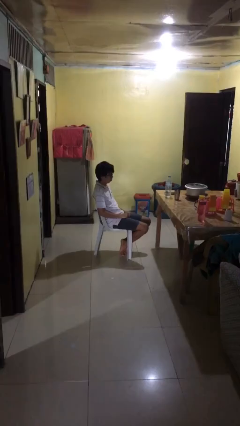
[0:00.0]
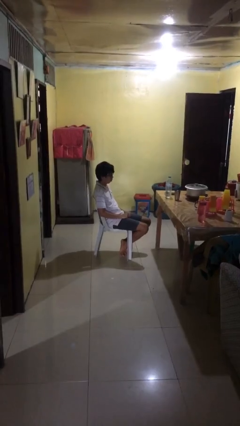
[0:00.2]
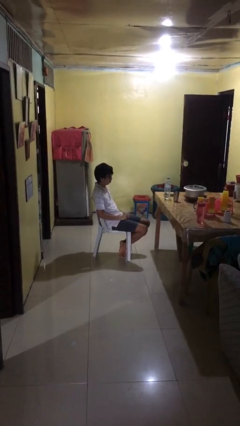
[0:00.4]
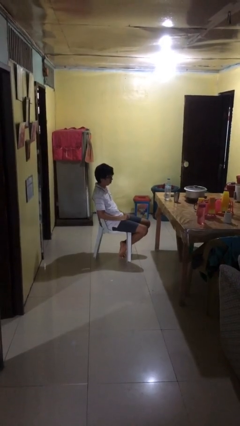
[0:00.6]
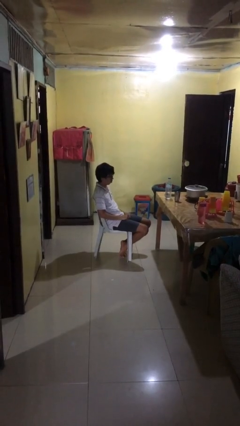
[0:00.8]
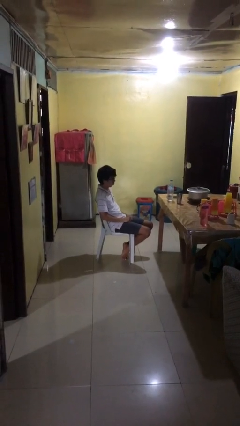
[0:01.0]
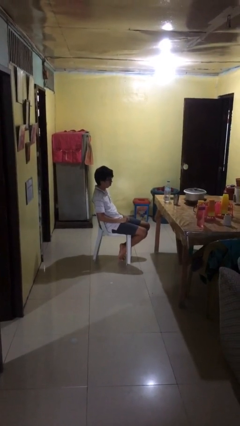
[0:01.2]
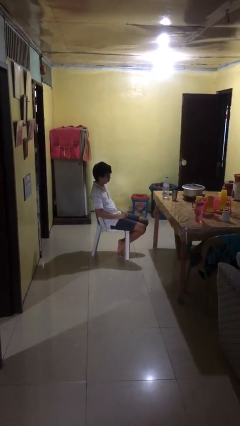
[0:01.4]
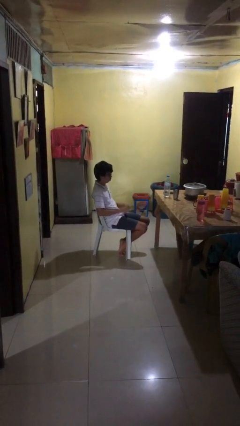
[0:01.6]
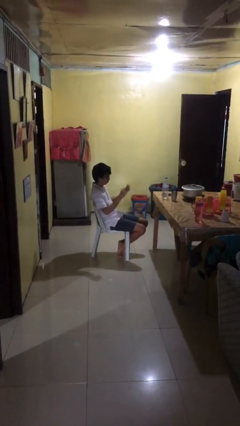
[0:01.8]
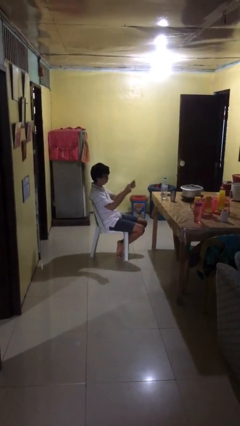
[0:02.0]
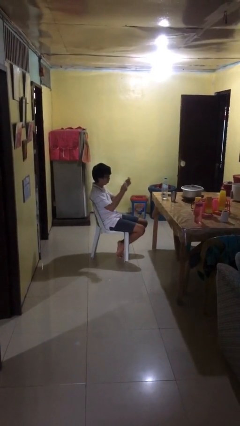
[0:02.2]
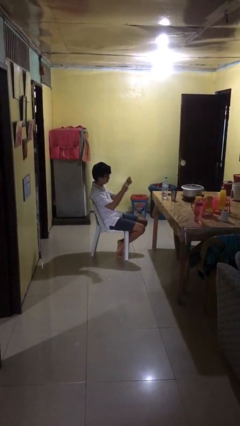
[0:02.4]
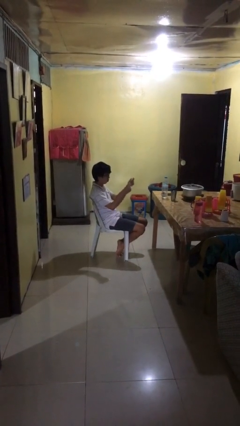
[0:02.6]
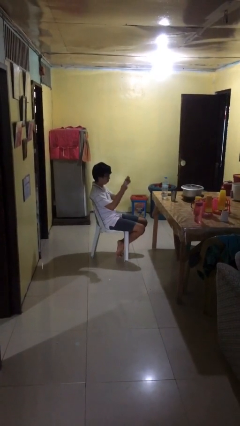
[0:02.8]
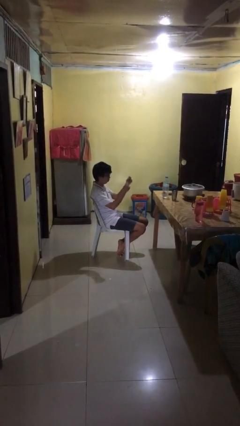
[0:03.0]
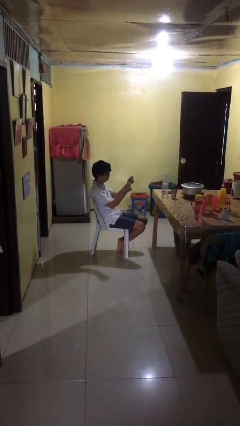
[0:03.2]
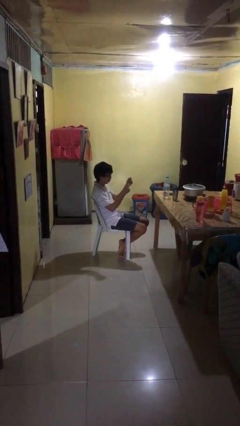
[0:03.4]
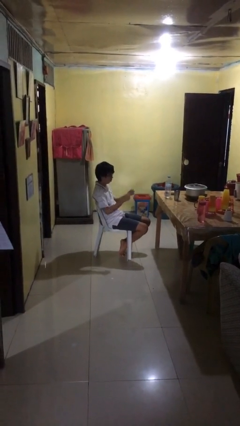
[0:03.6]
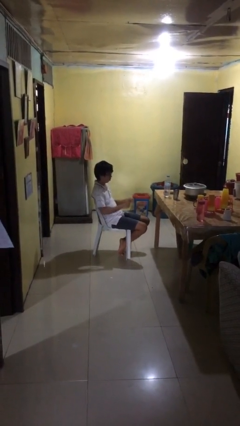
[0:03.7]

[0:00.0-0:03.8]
person snaps fingers

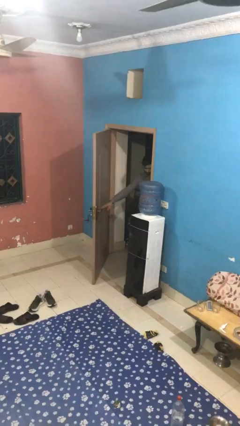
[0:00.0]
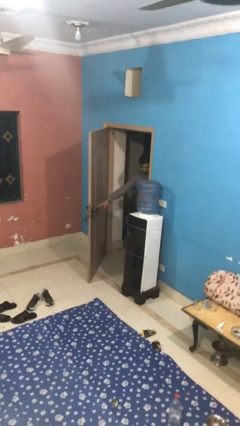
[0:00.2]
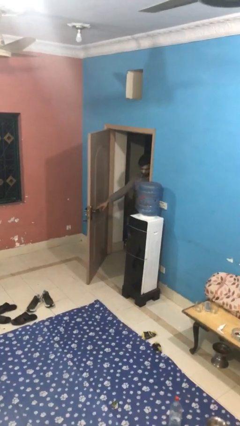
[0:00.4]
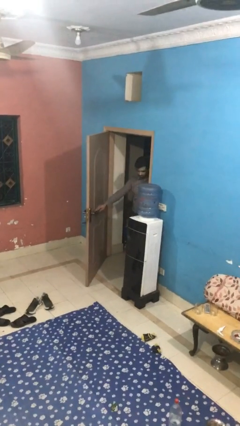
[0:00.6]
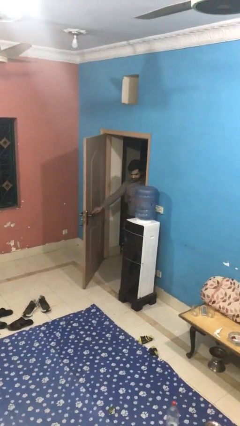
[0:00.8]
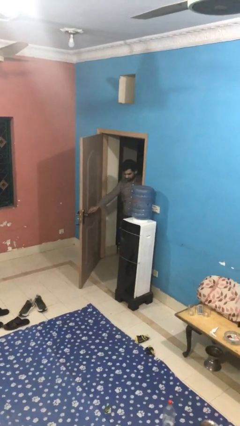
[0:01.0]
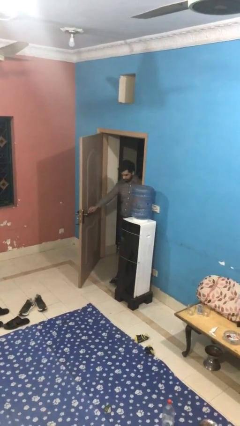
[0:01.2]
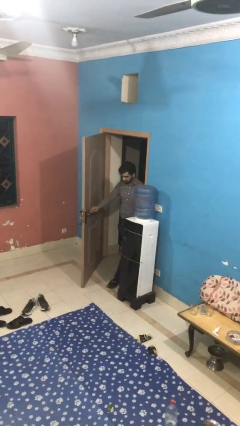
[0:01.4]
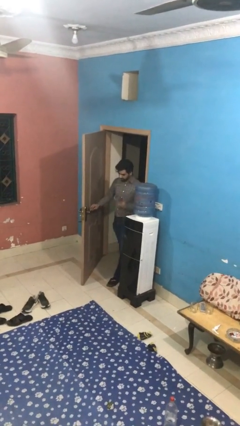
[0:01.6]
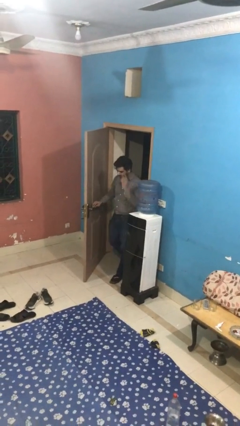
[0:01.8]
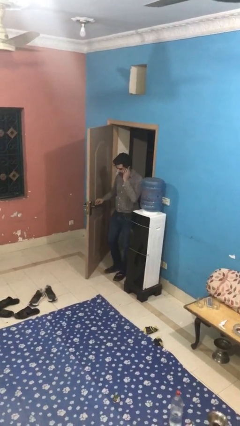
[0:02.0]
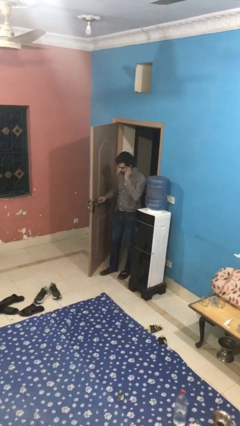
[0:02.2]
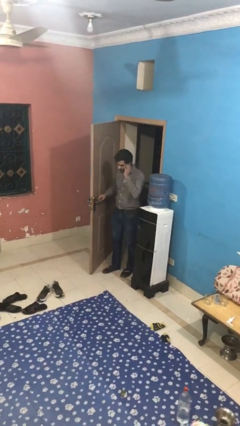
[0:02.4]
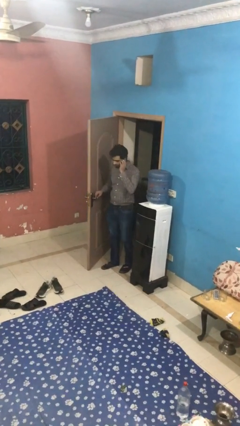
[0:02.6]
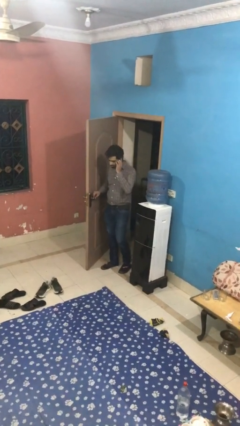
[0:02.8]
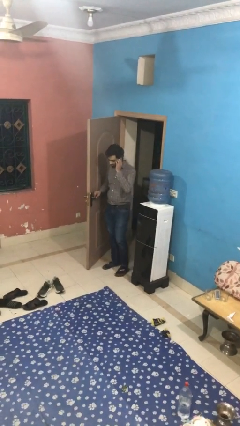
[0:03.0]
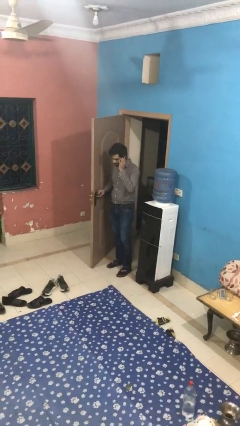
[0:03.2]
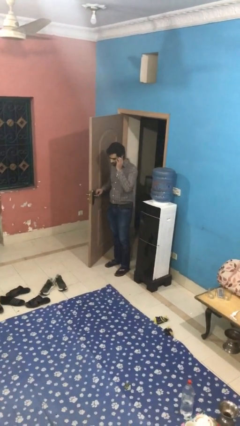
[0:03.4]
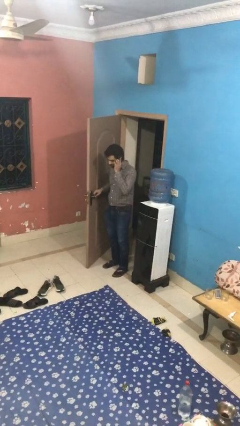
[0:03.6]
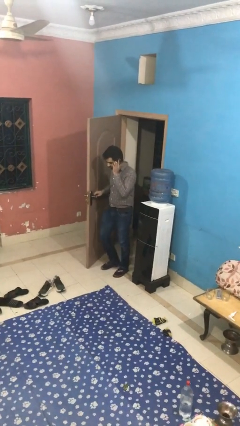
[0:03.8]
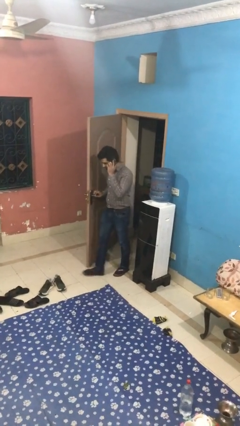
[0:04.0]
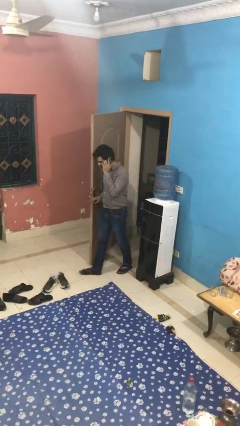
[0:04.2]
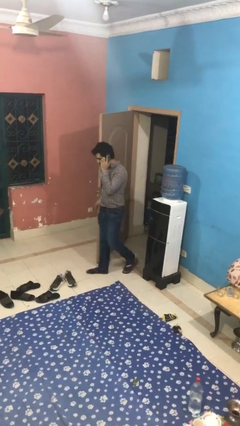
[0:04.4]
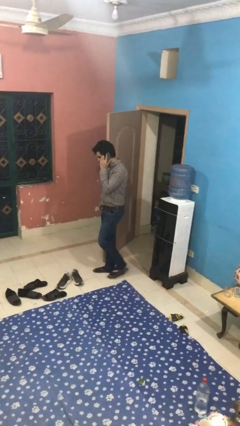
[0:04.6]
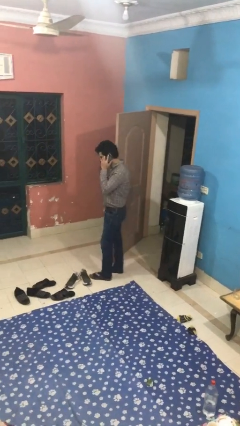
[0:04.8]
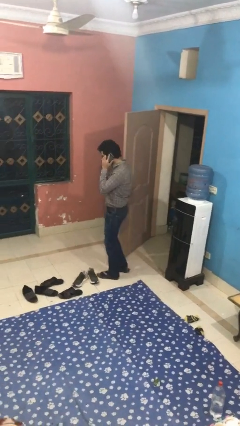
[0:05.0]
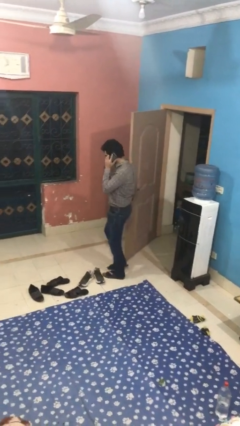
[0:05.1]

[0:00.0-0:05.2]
person enters scene through structure

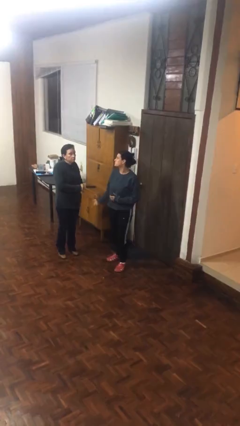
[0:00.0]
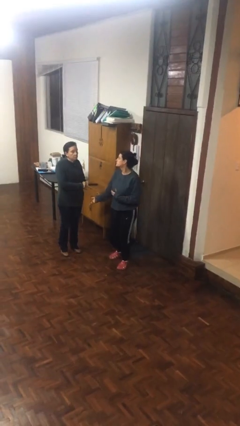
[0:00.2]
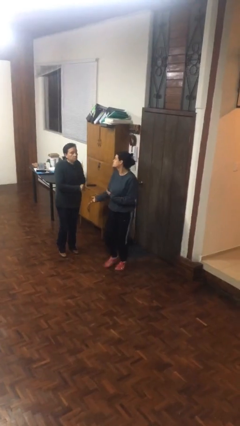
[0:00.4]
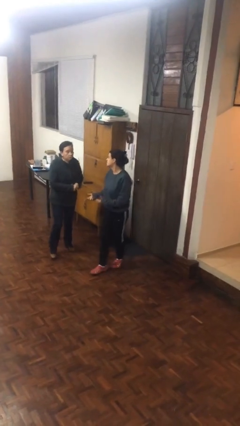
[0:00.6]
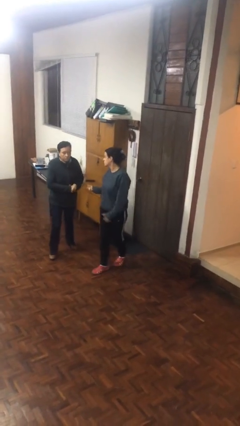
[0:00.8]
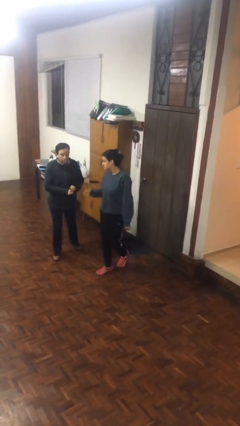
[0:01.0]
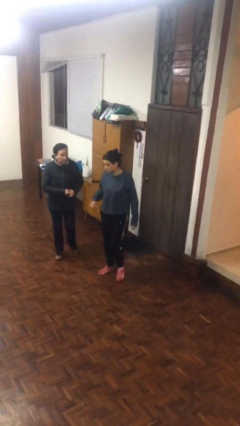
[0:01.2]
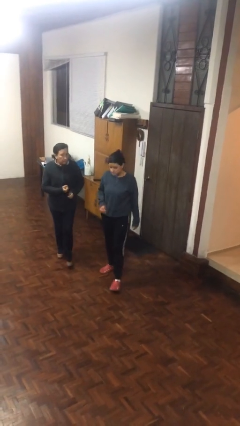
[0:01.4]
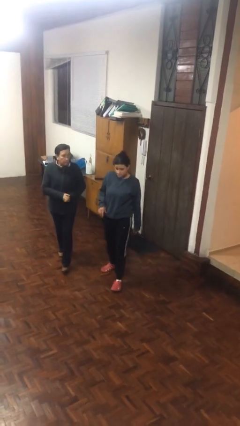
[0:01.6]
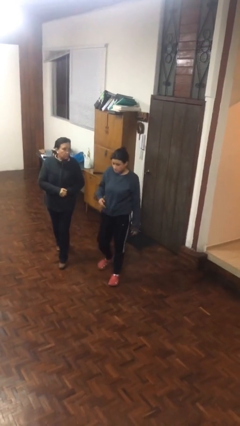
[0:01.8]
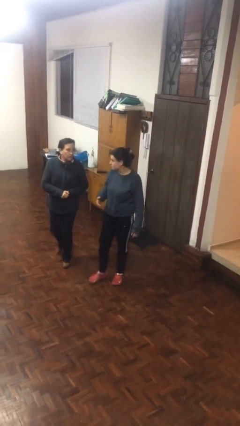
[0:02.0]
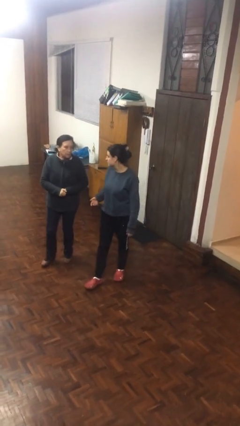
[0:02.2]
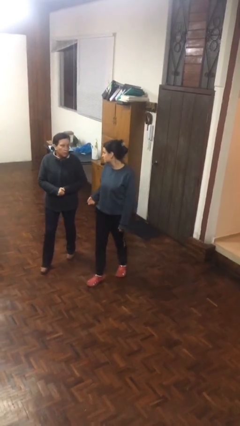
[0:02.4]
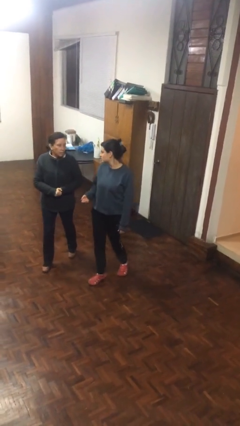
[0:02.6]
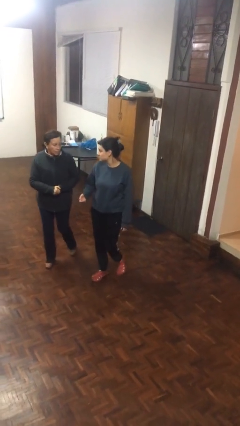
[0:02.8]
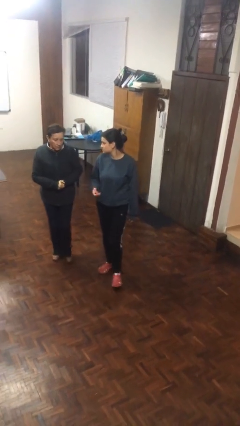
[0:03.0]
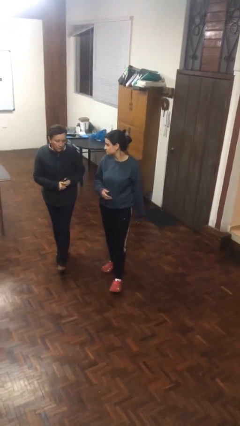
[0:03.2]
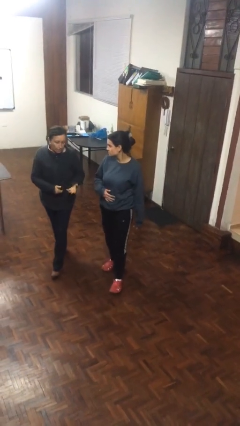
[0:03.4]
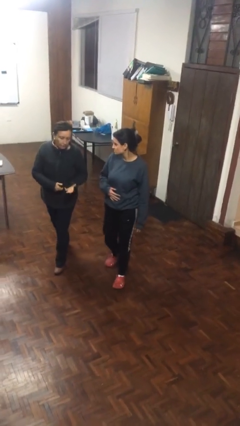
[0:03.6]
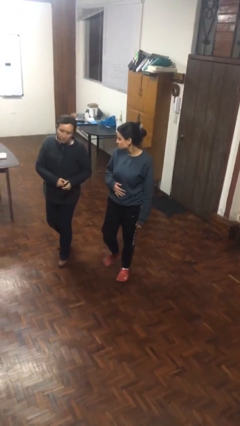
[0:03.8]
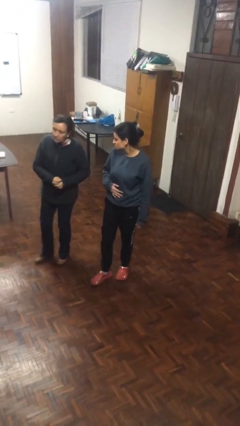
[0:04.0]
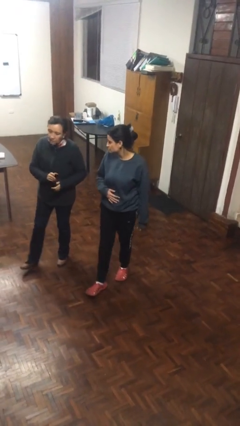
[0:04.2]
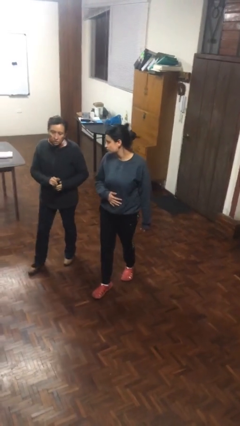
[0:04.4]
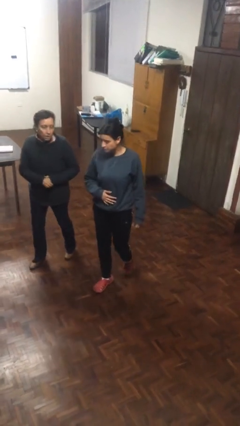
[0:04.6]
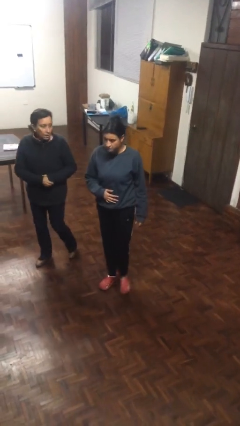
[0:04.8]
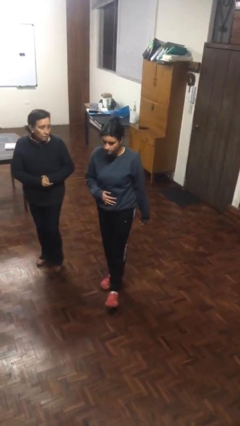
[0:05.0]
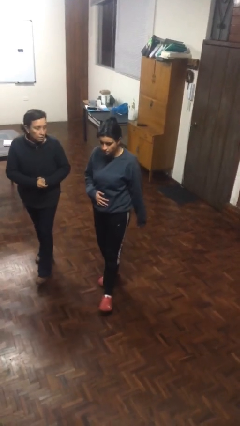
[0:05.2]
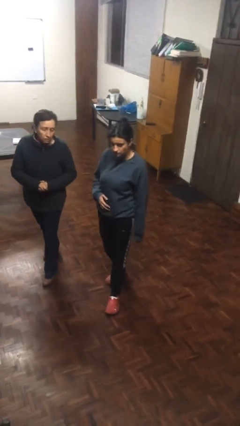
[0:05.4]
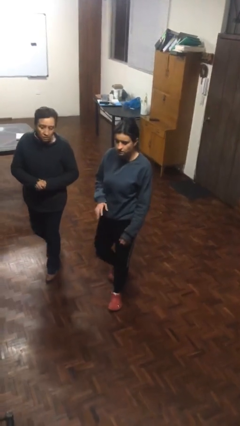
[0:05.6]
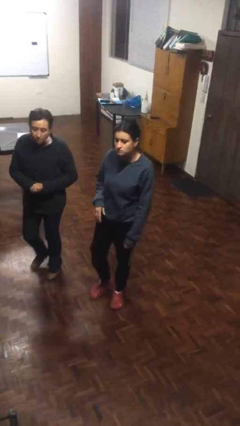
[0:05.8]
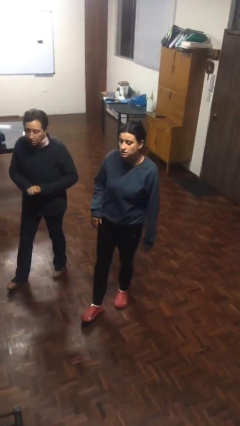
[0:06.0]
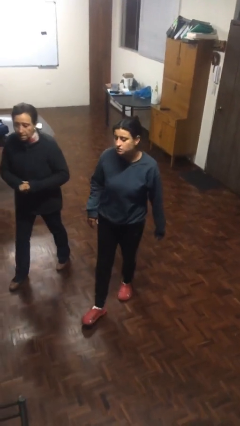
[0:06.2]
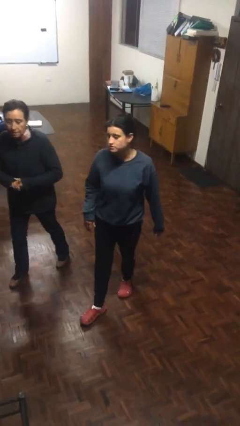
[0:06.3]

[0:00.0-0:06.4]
person talks to person

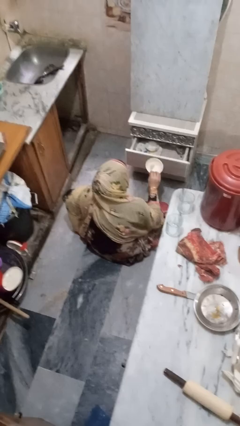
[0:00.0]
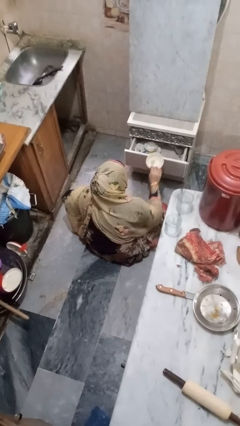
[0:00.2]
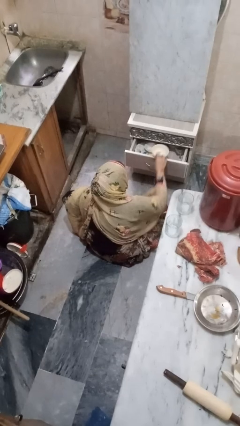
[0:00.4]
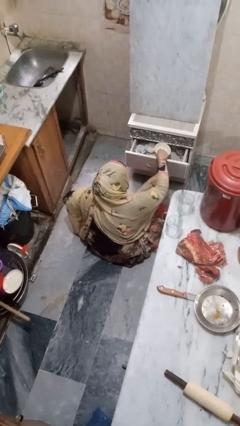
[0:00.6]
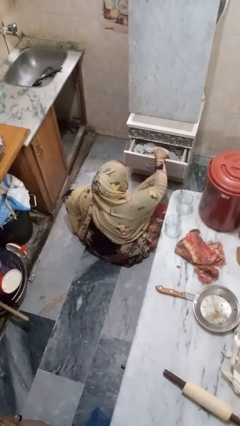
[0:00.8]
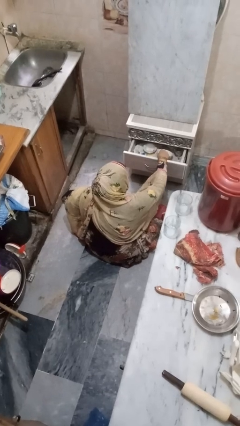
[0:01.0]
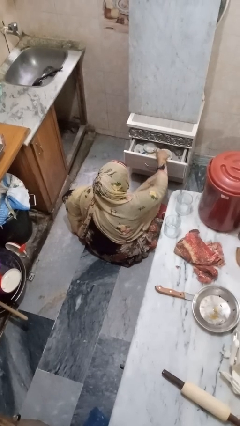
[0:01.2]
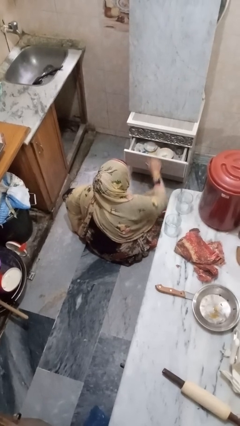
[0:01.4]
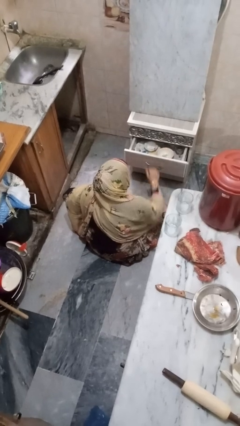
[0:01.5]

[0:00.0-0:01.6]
person puts object into kitchen drawer

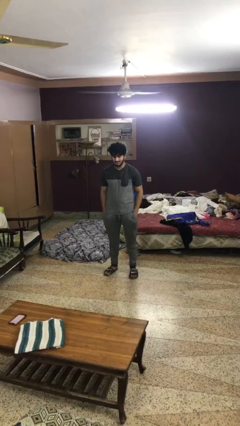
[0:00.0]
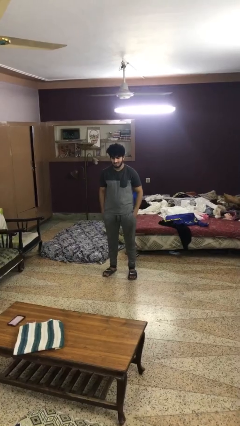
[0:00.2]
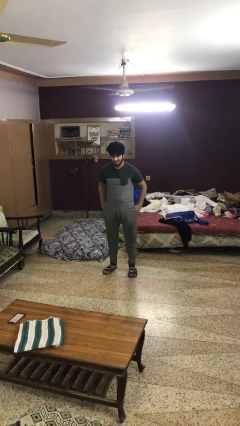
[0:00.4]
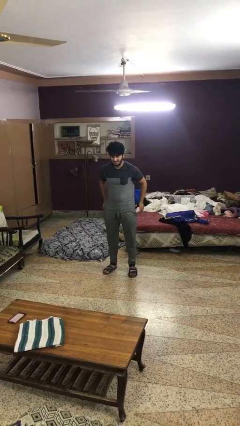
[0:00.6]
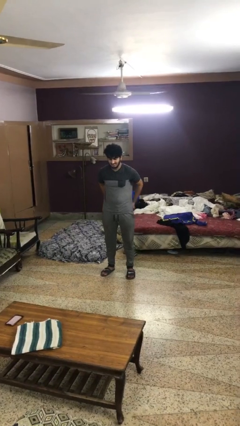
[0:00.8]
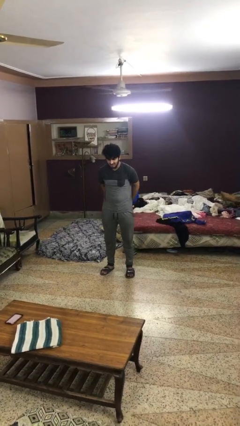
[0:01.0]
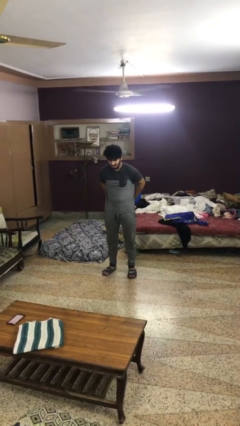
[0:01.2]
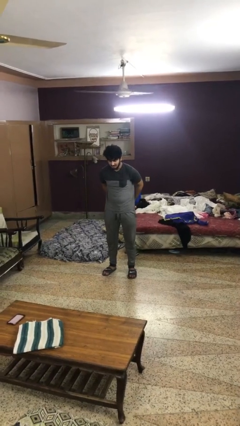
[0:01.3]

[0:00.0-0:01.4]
person puts hands in back pockets
